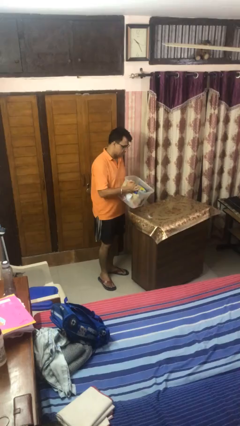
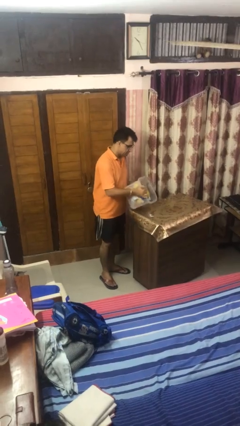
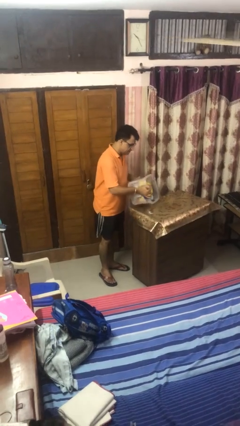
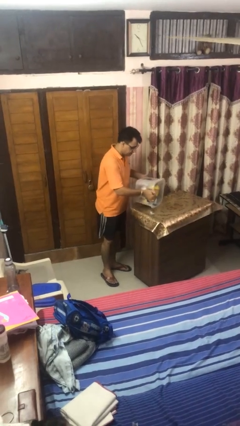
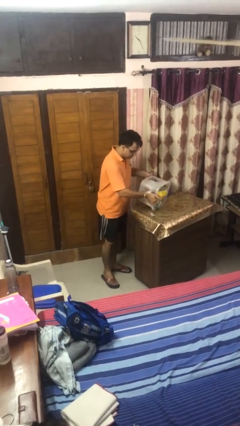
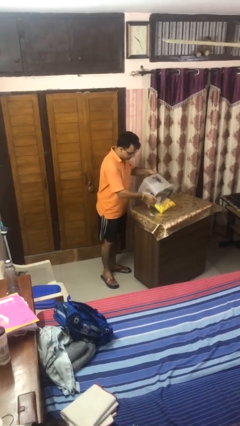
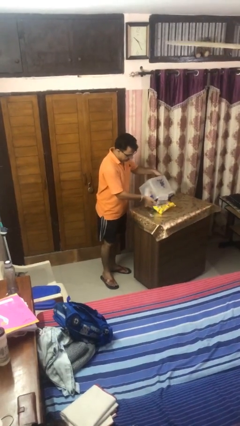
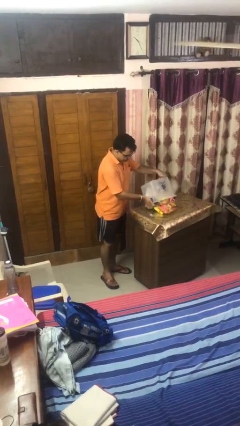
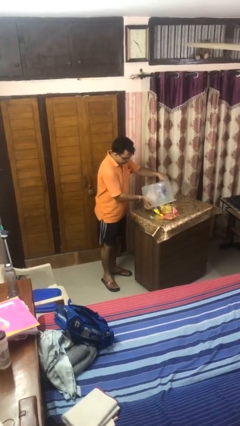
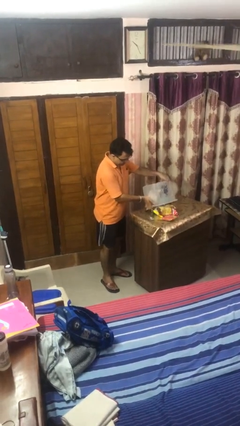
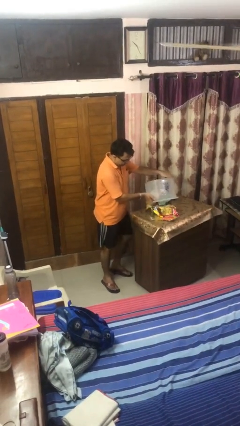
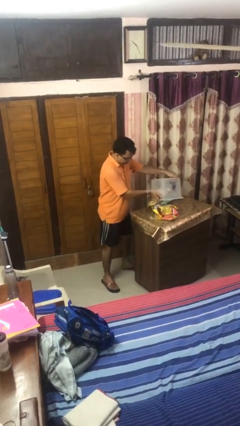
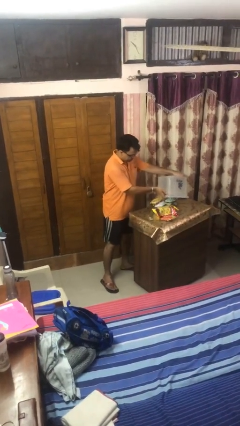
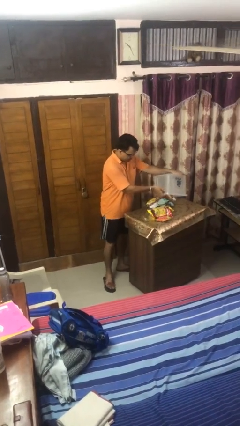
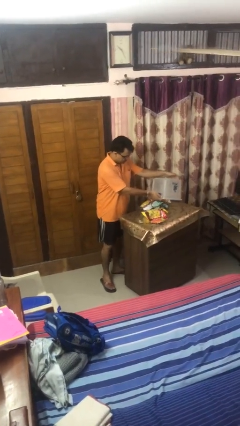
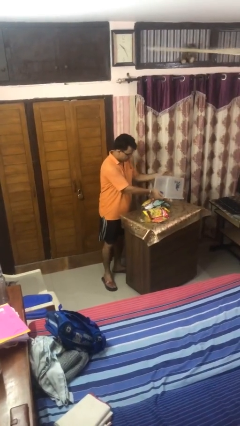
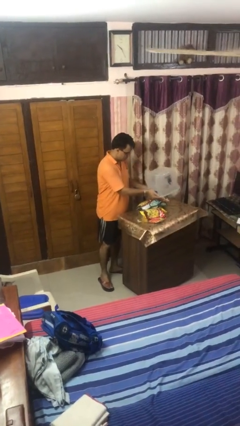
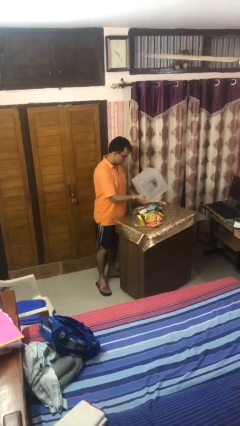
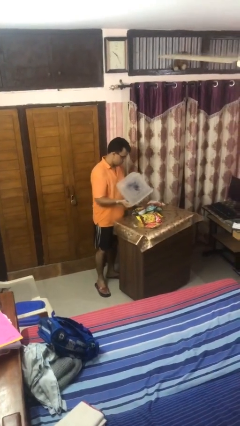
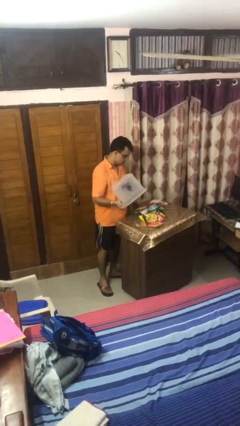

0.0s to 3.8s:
person unloads box onto table

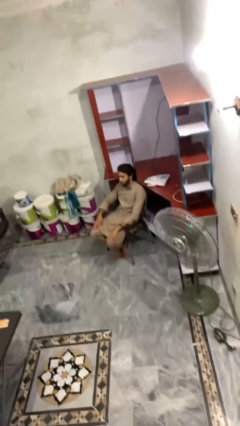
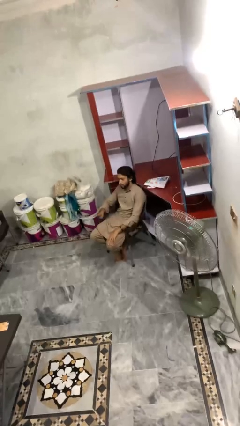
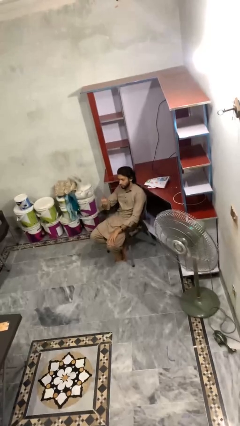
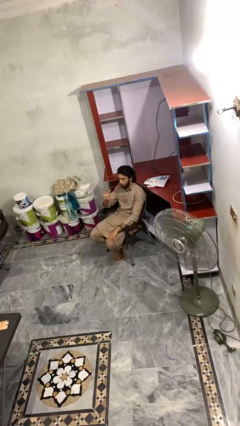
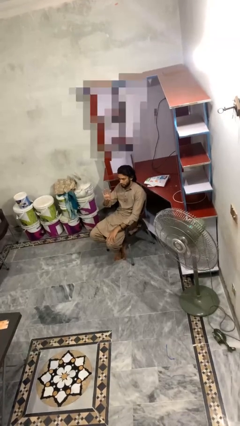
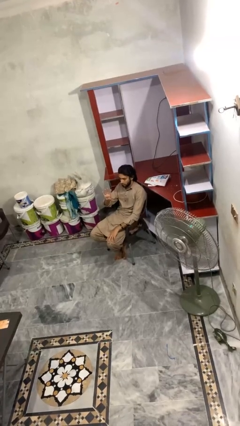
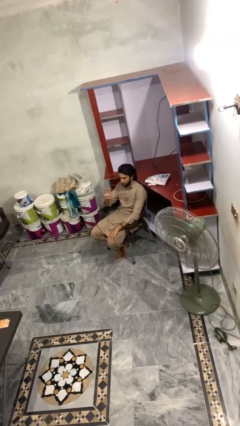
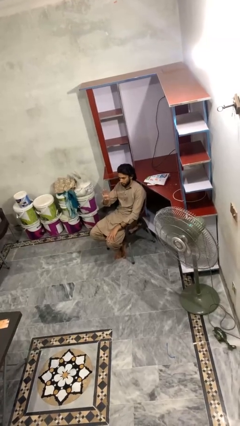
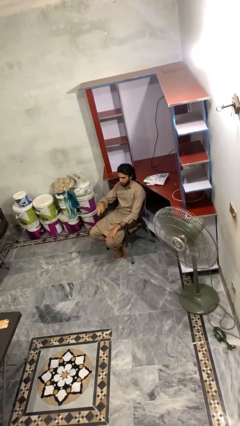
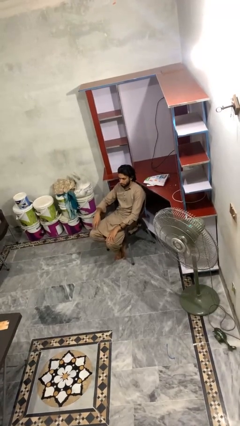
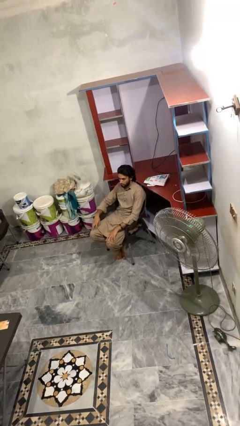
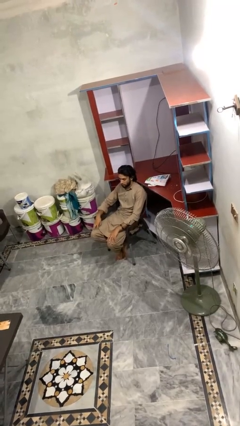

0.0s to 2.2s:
person gestures number four

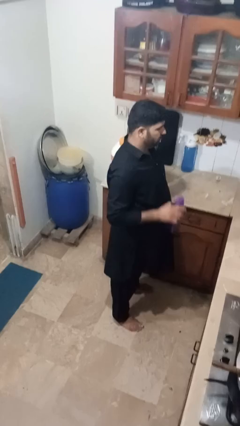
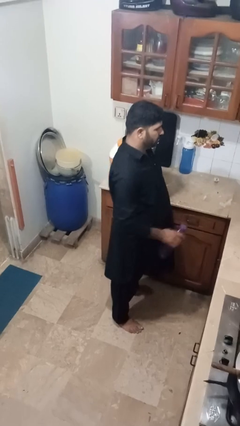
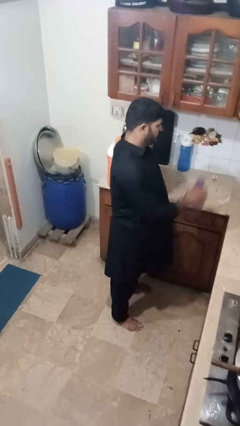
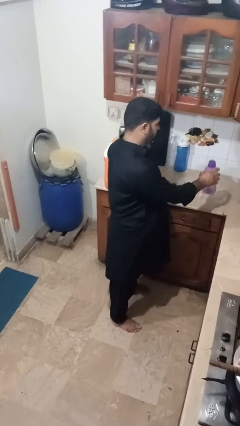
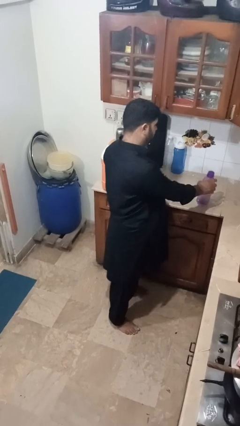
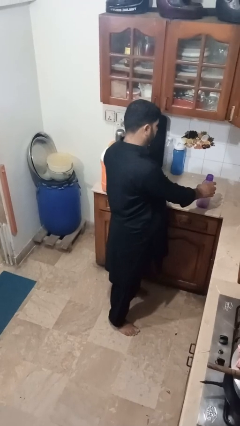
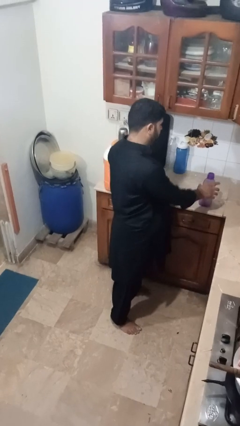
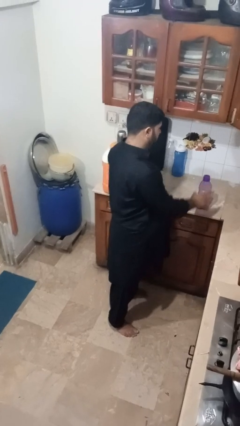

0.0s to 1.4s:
person puts down object on countertop

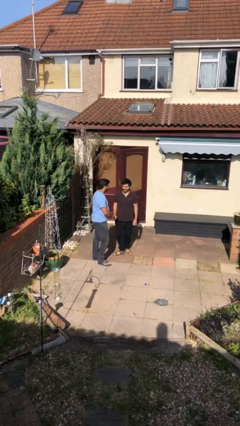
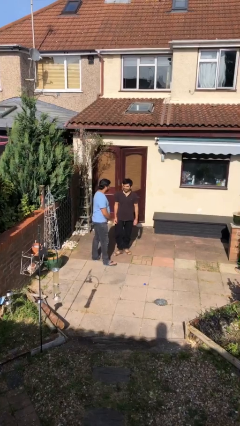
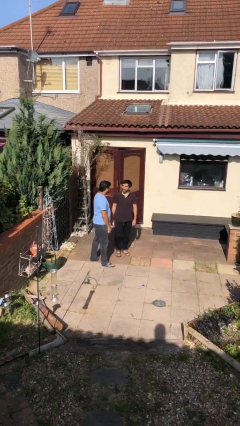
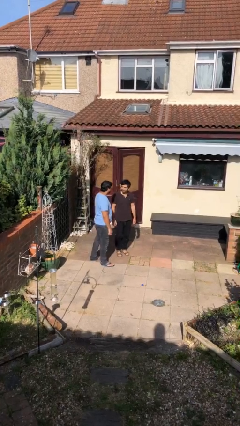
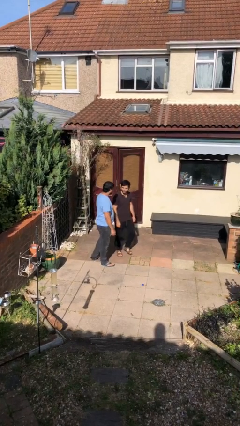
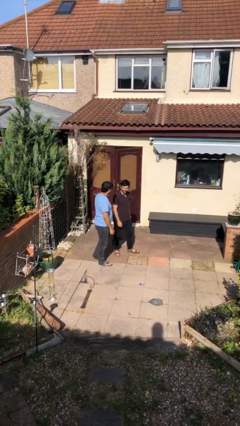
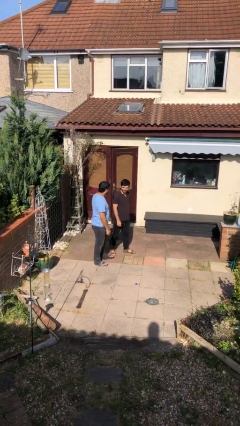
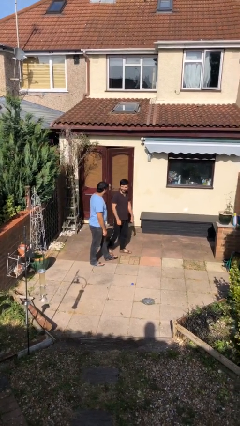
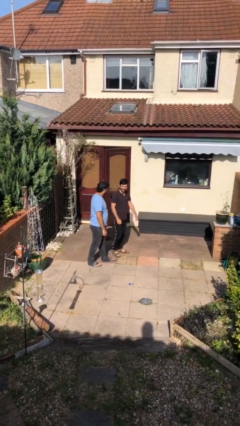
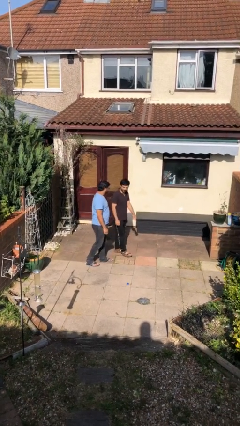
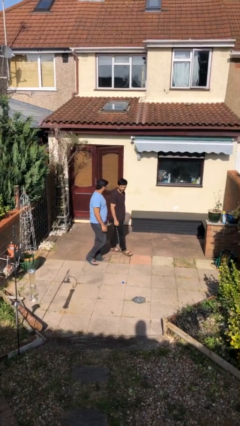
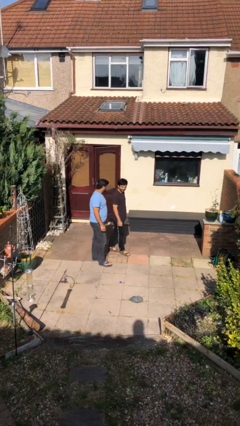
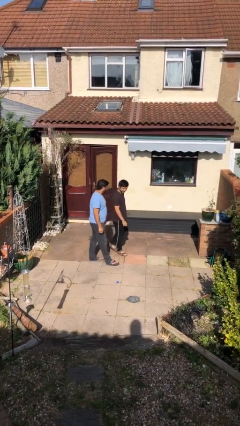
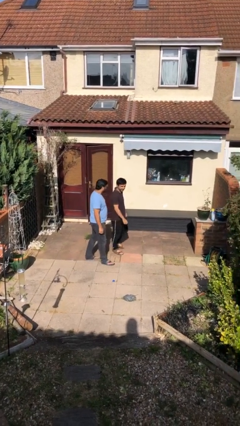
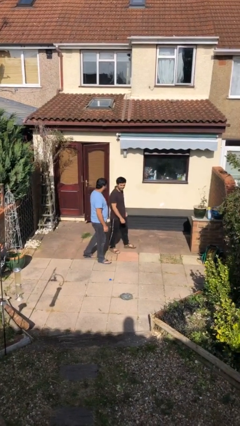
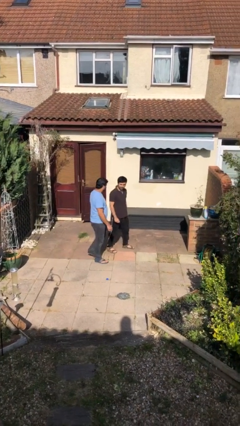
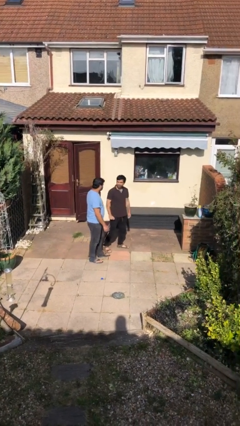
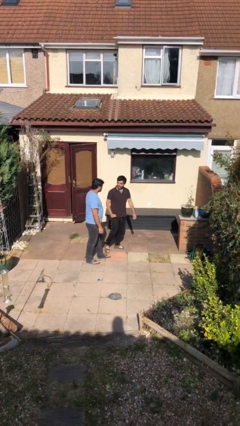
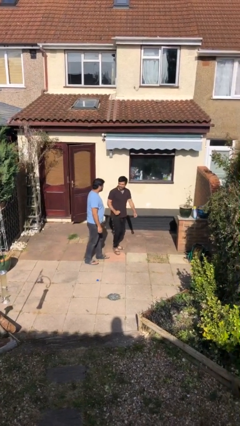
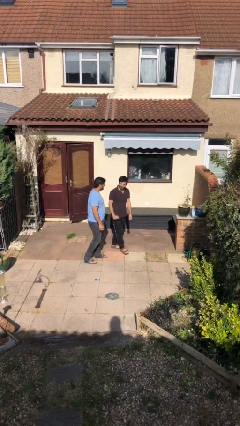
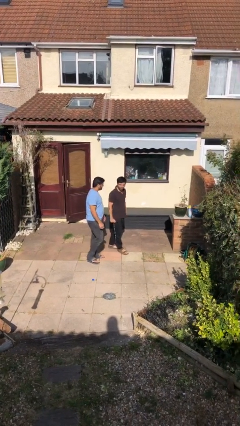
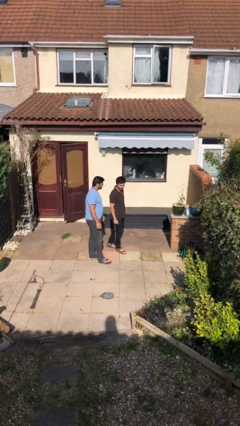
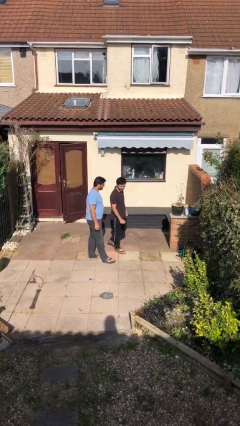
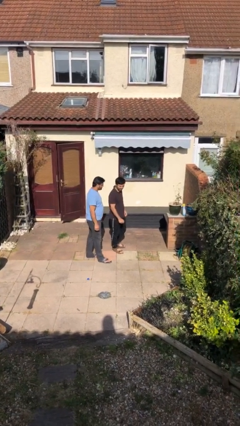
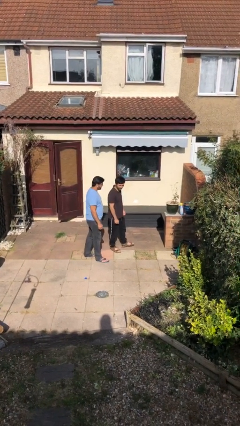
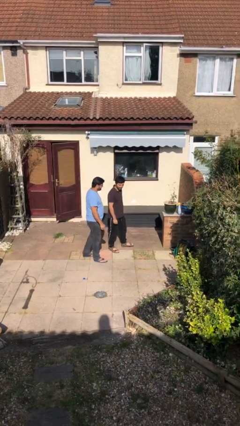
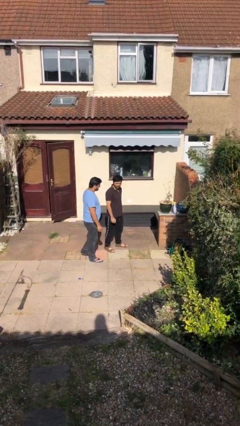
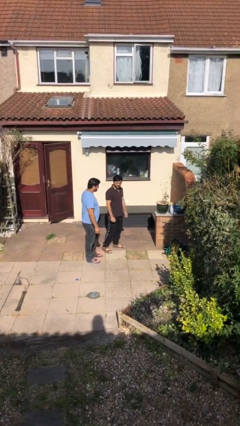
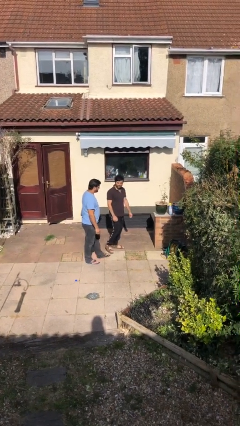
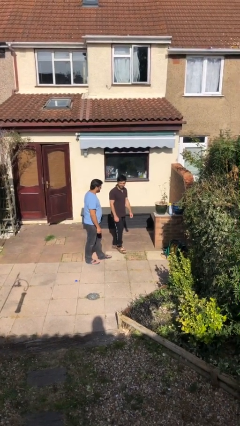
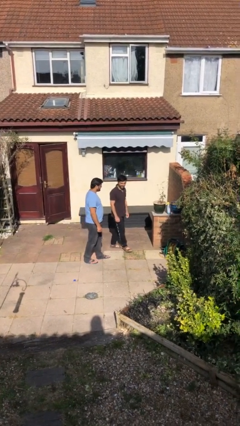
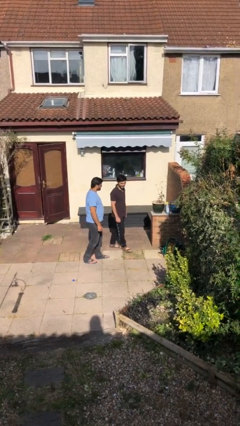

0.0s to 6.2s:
person talks to person

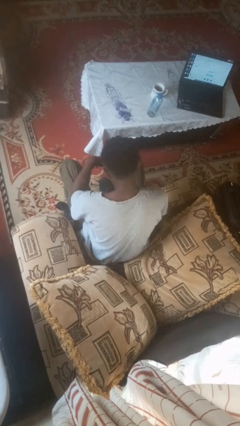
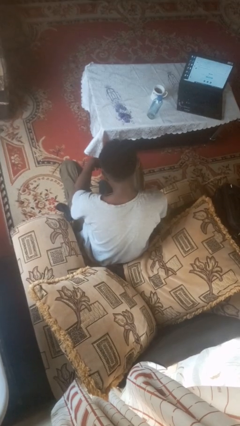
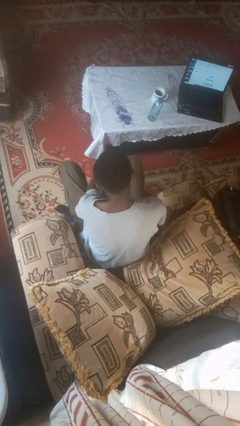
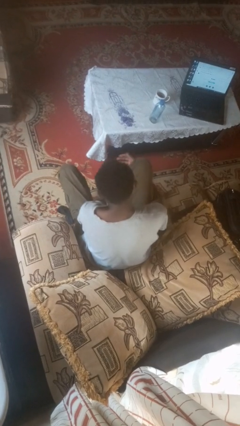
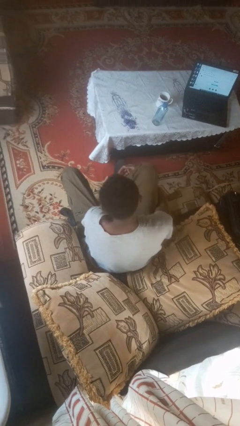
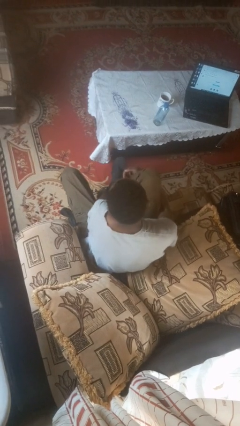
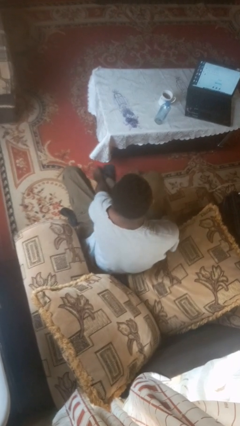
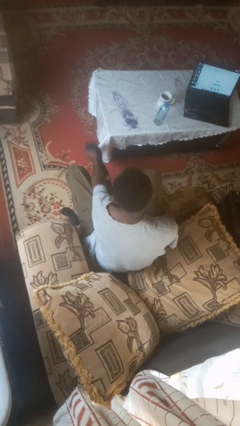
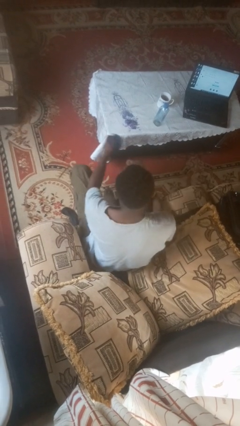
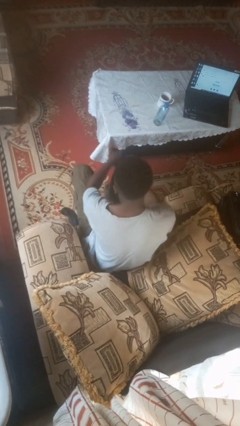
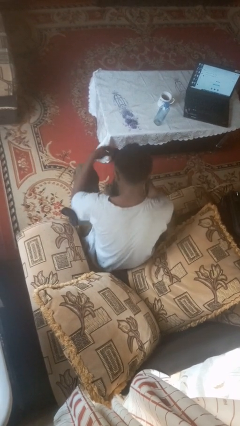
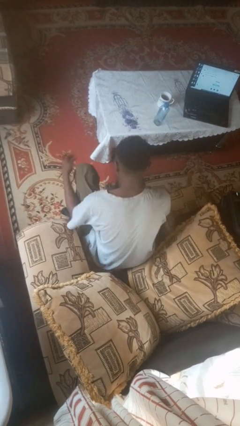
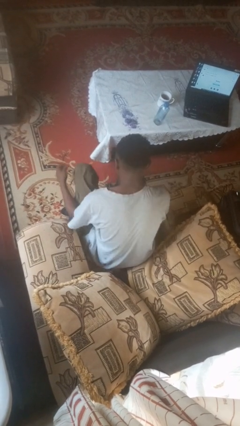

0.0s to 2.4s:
person takes off socks

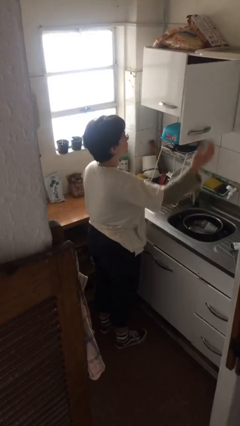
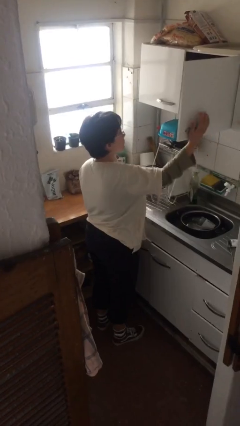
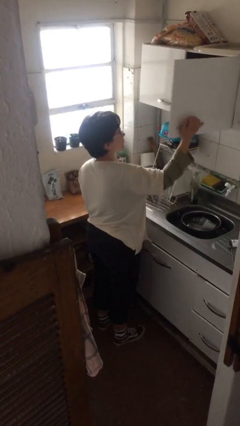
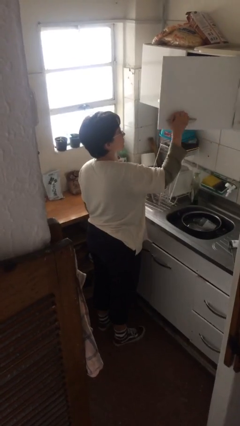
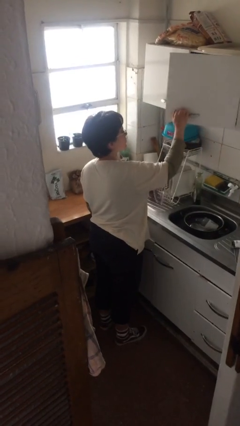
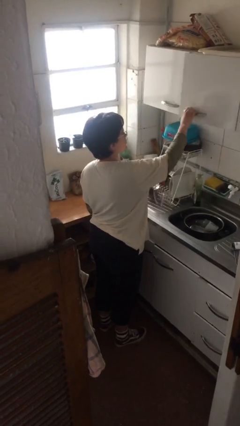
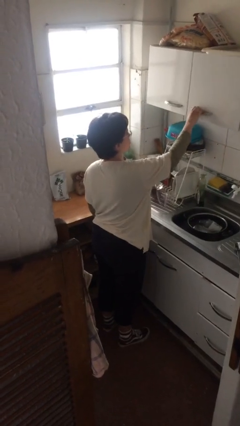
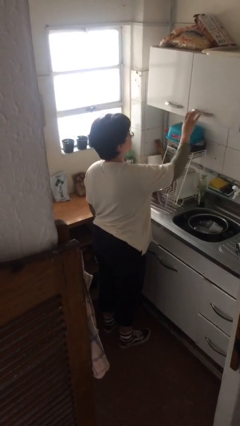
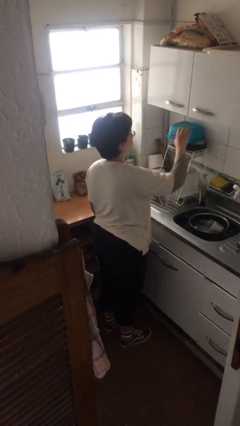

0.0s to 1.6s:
person closes cabinet
